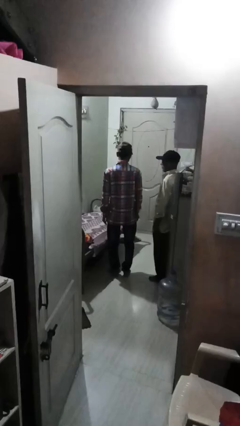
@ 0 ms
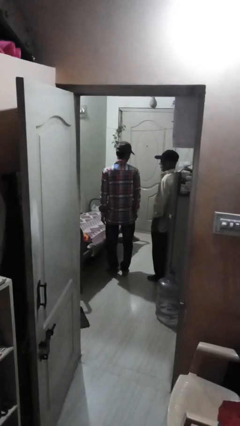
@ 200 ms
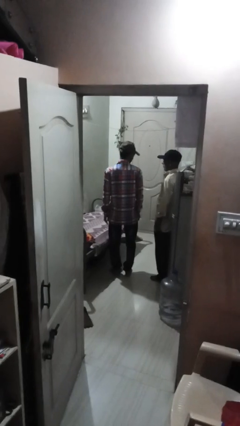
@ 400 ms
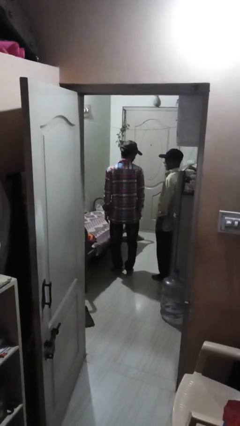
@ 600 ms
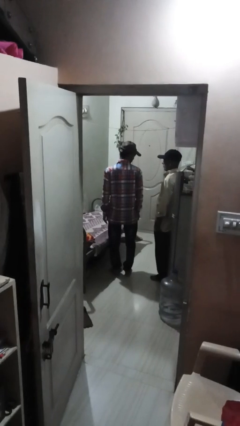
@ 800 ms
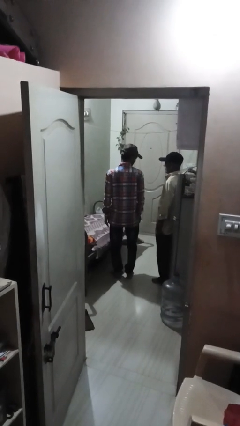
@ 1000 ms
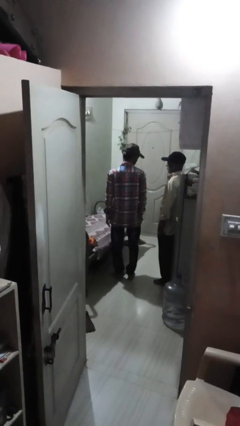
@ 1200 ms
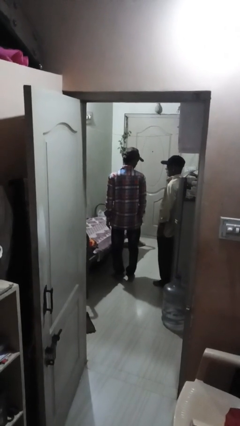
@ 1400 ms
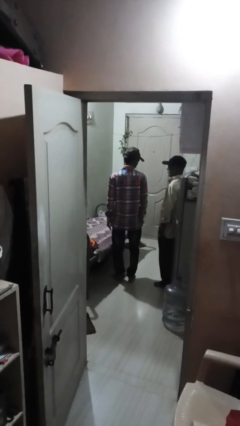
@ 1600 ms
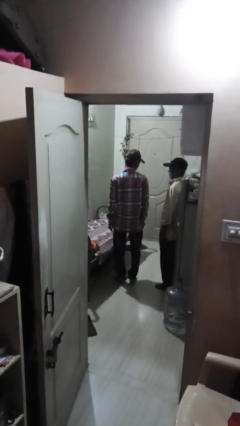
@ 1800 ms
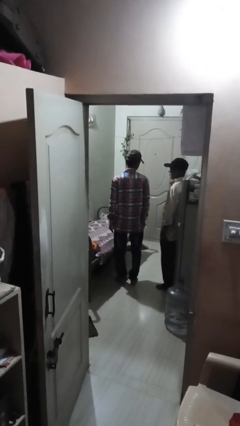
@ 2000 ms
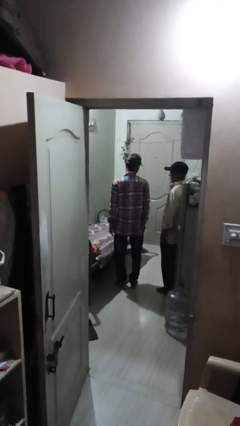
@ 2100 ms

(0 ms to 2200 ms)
person looks over shoulder

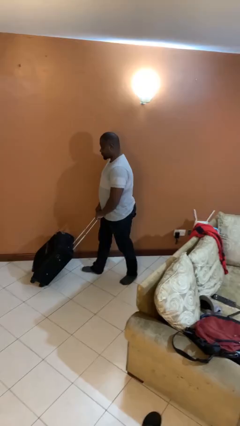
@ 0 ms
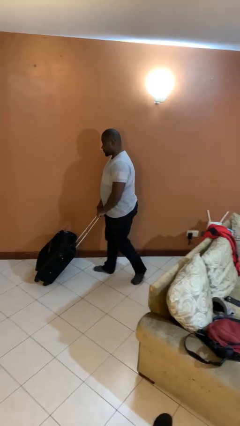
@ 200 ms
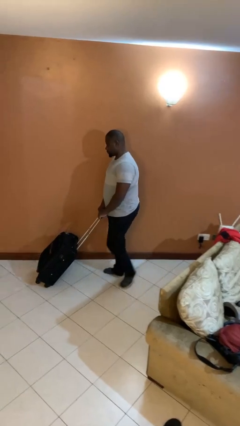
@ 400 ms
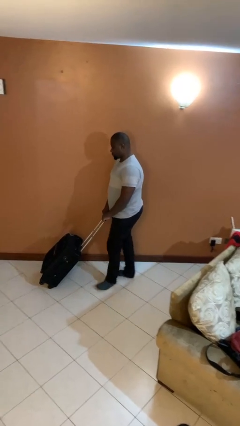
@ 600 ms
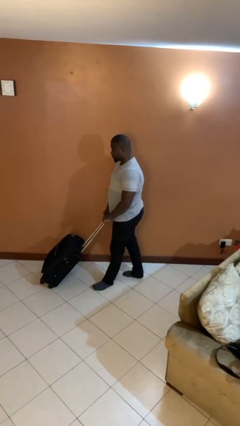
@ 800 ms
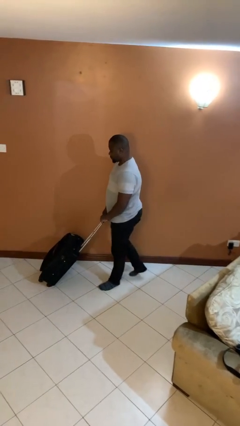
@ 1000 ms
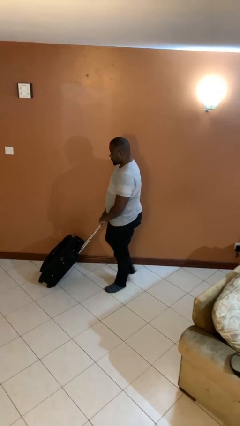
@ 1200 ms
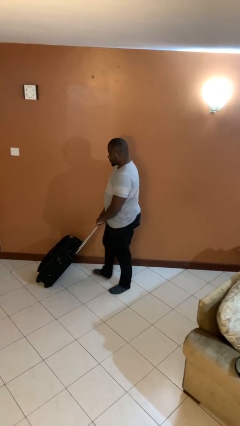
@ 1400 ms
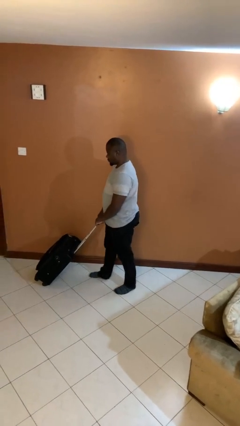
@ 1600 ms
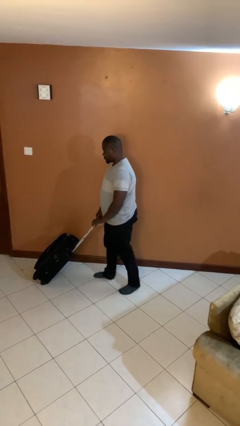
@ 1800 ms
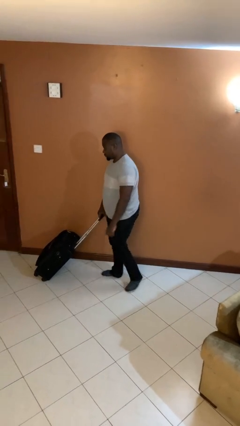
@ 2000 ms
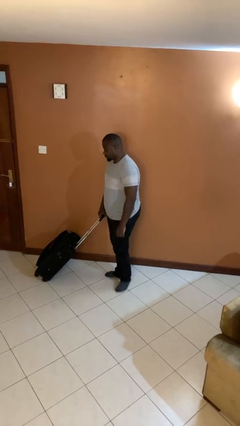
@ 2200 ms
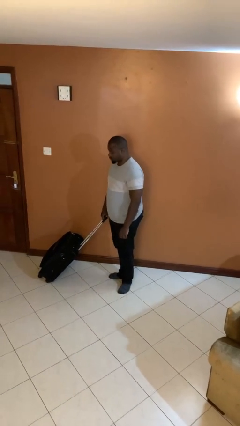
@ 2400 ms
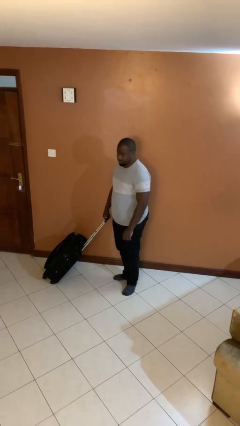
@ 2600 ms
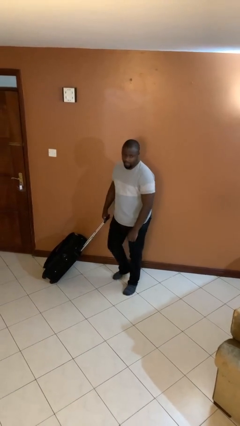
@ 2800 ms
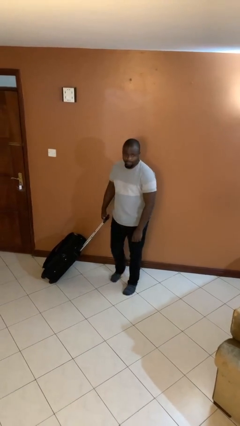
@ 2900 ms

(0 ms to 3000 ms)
person pushes wheeled cart

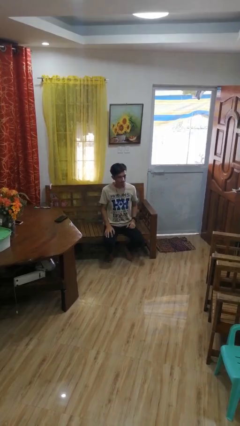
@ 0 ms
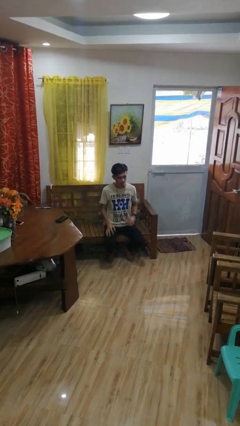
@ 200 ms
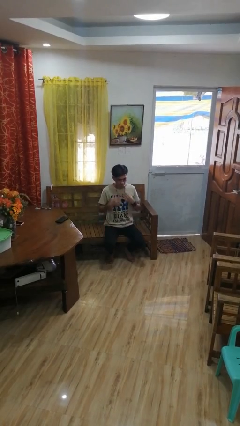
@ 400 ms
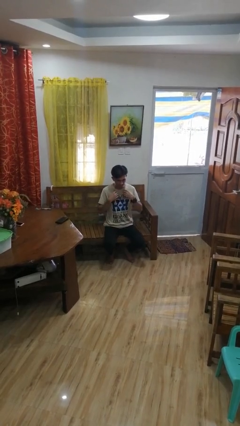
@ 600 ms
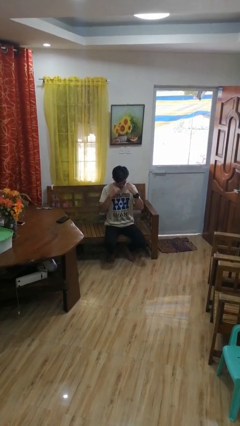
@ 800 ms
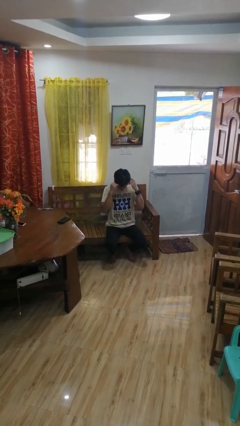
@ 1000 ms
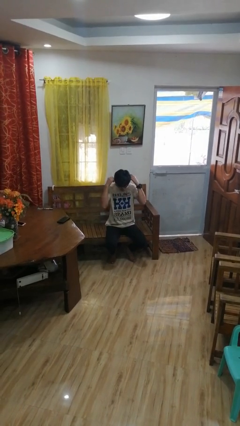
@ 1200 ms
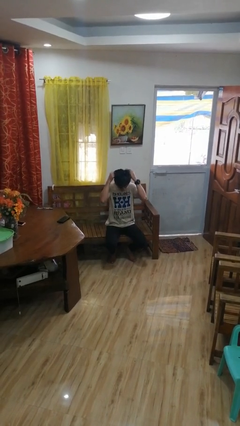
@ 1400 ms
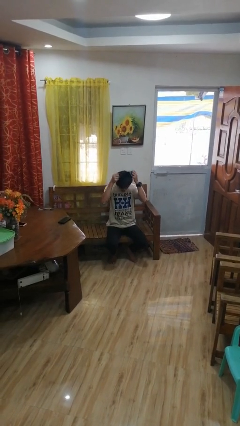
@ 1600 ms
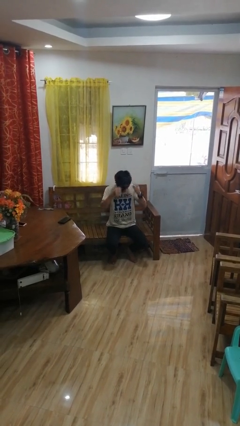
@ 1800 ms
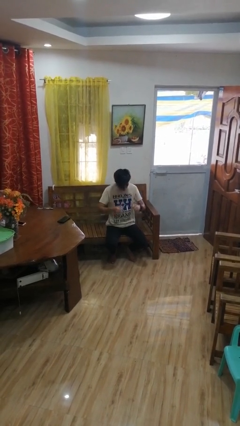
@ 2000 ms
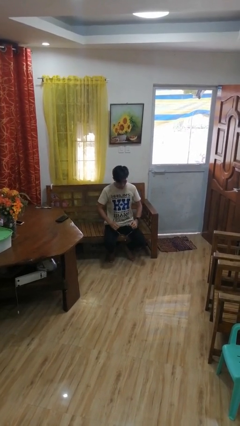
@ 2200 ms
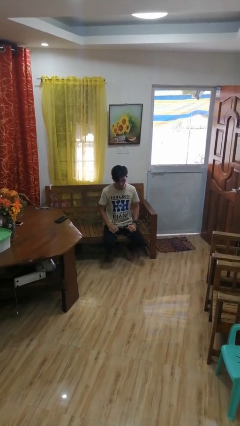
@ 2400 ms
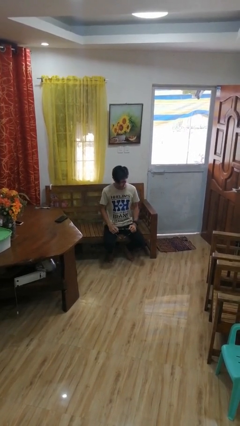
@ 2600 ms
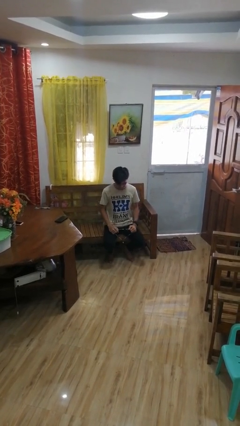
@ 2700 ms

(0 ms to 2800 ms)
person takes off necklace

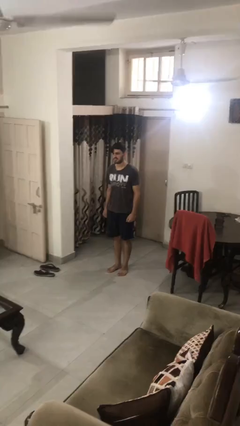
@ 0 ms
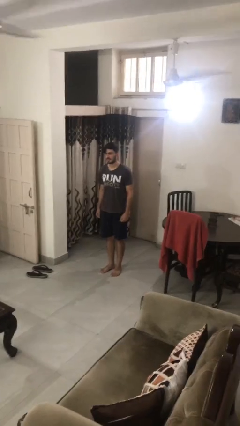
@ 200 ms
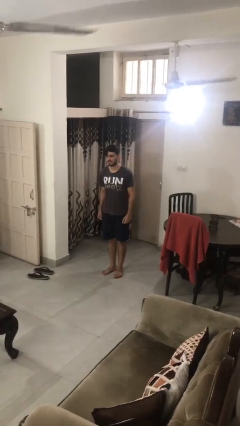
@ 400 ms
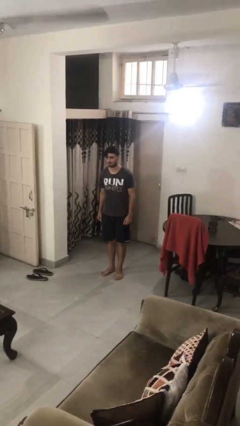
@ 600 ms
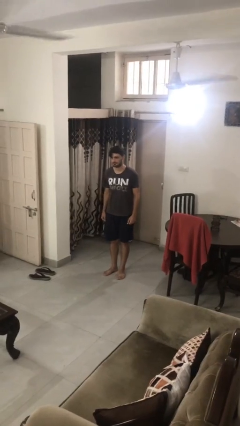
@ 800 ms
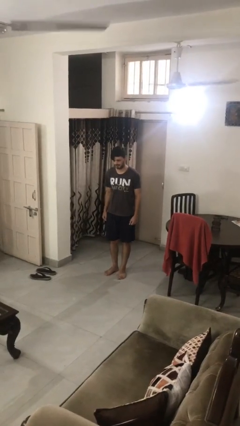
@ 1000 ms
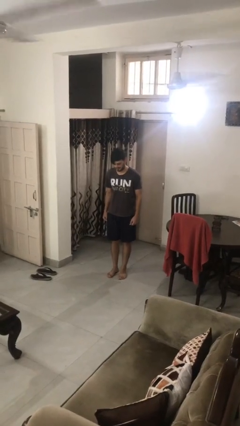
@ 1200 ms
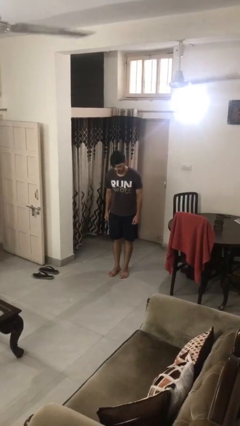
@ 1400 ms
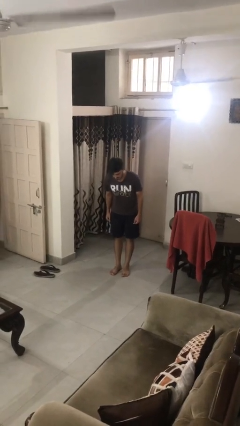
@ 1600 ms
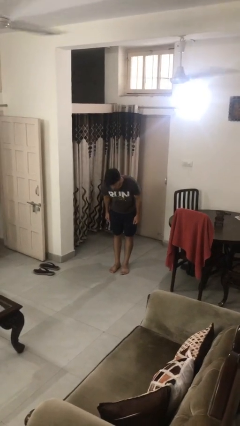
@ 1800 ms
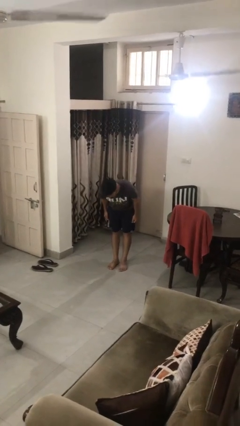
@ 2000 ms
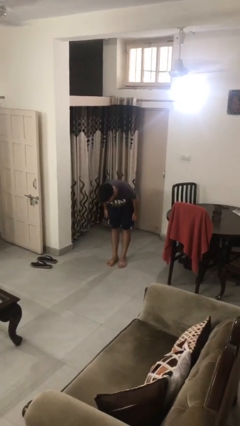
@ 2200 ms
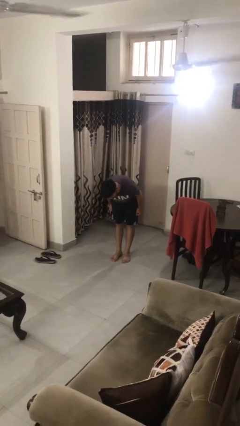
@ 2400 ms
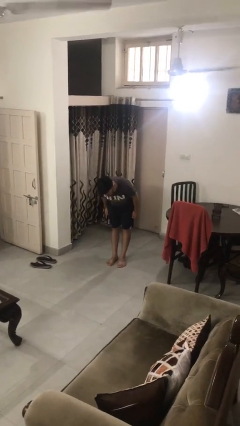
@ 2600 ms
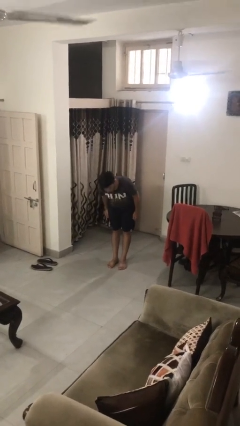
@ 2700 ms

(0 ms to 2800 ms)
person bows

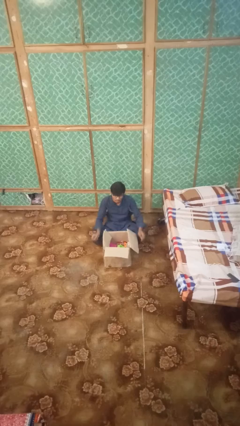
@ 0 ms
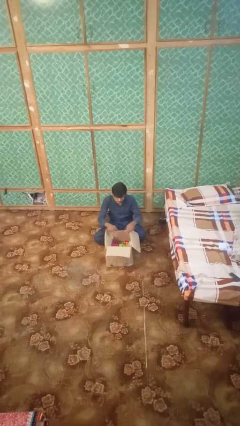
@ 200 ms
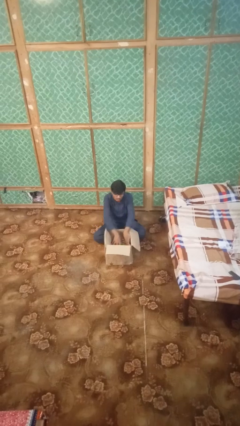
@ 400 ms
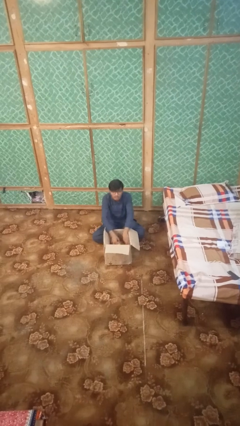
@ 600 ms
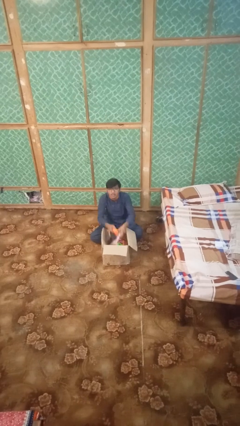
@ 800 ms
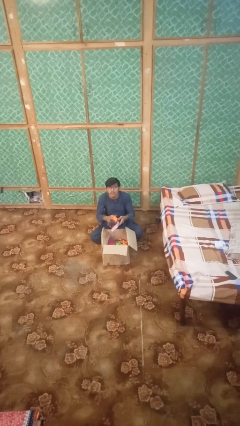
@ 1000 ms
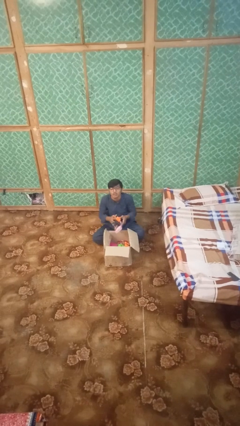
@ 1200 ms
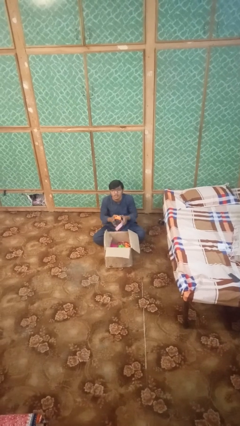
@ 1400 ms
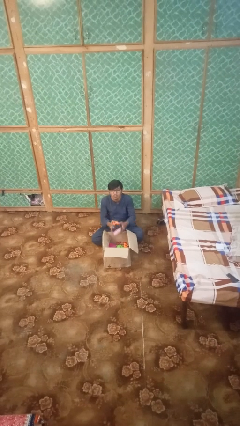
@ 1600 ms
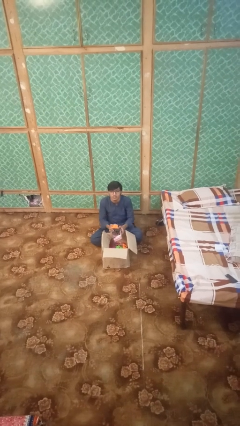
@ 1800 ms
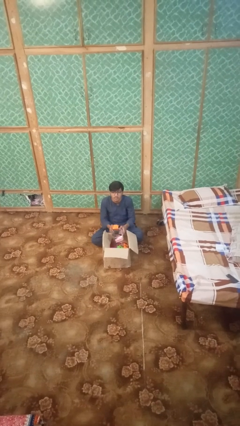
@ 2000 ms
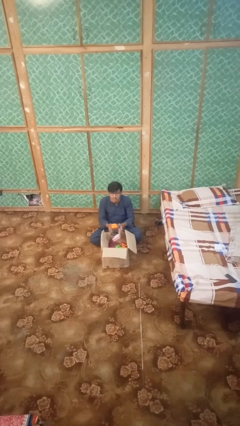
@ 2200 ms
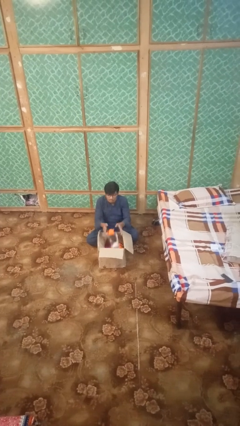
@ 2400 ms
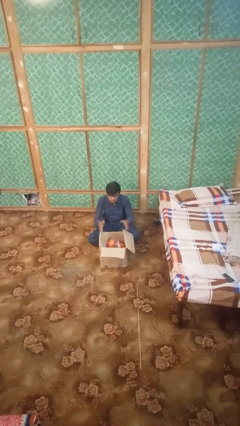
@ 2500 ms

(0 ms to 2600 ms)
person takes object from box

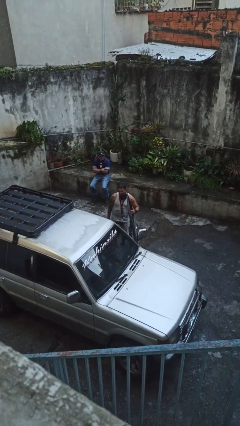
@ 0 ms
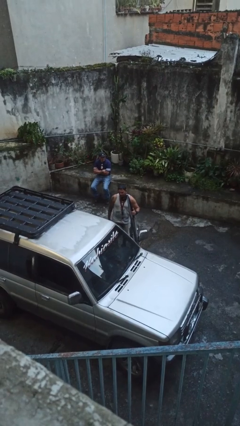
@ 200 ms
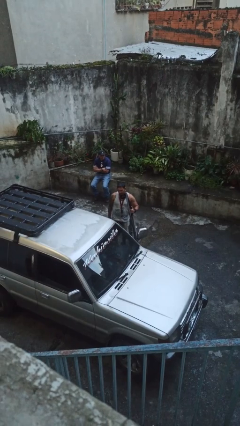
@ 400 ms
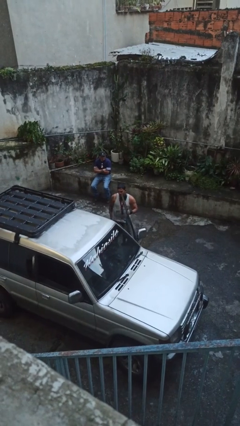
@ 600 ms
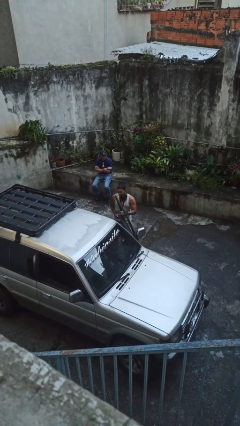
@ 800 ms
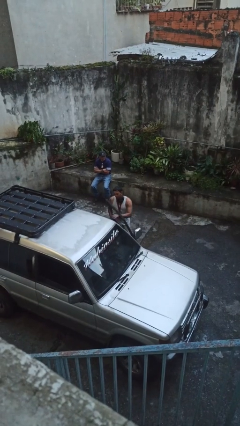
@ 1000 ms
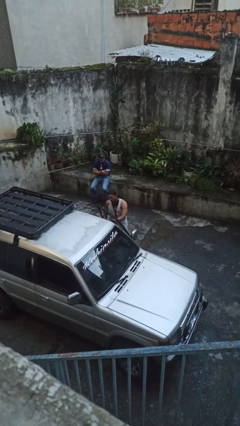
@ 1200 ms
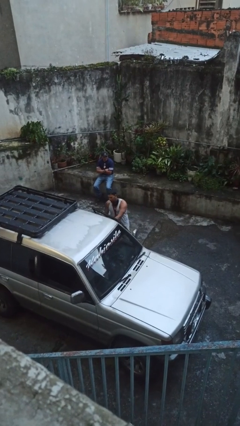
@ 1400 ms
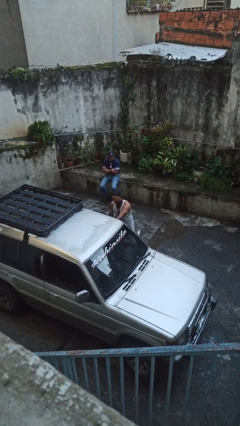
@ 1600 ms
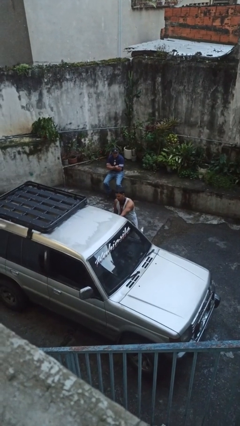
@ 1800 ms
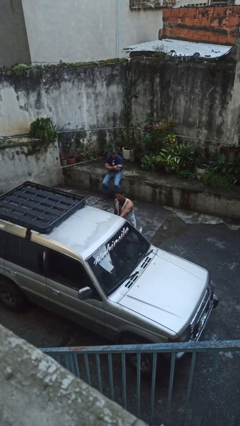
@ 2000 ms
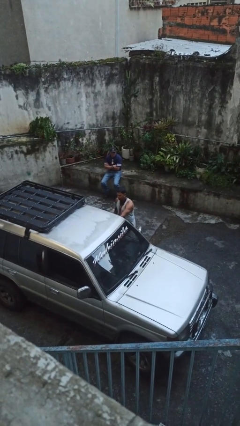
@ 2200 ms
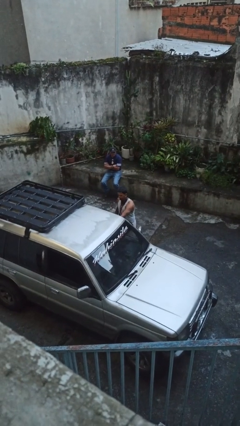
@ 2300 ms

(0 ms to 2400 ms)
person closes car door

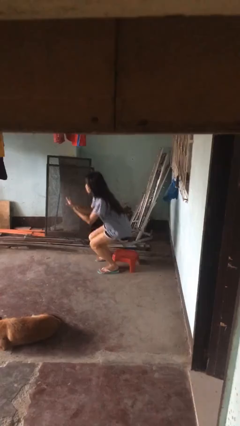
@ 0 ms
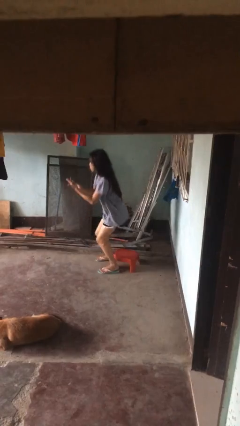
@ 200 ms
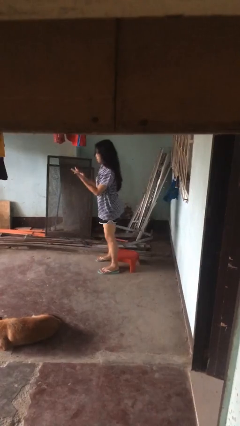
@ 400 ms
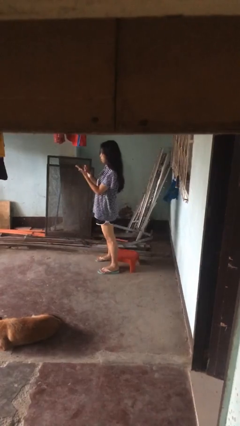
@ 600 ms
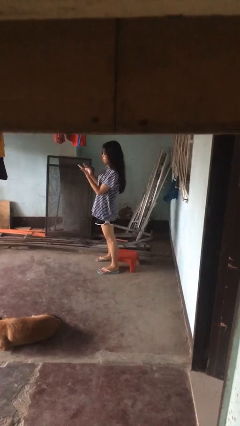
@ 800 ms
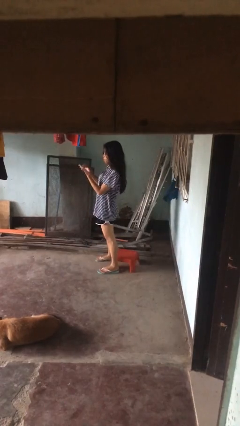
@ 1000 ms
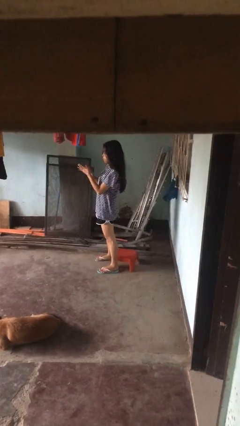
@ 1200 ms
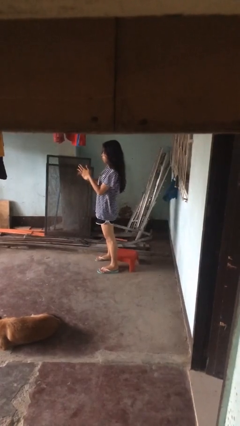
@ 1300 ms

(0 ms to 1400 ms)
person stands up
